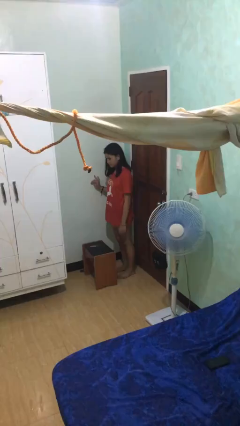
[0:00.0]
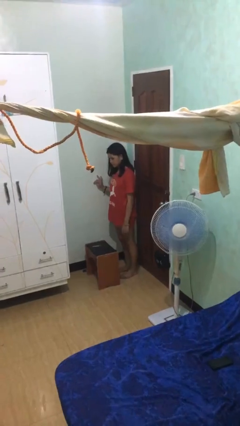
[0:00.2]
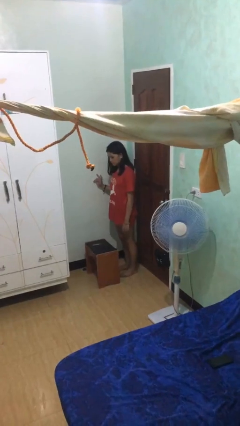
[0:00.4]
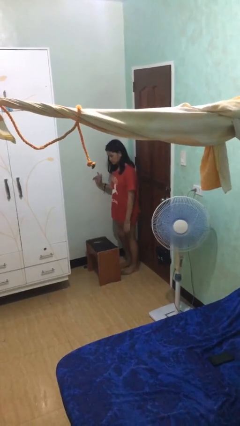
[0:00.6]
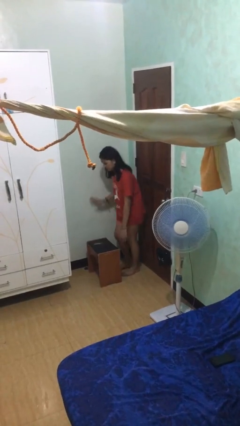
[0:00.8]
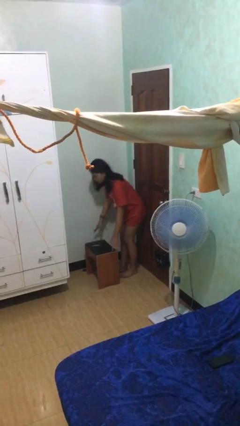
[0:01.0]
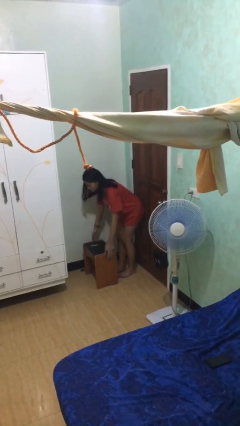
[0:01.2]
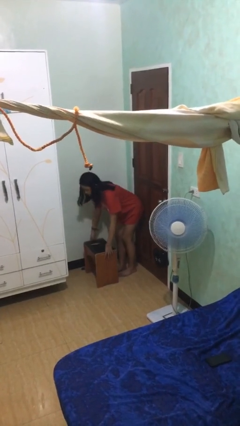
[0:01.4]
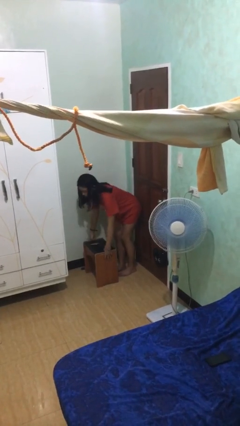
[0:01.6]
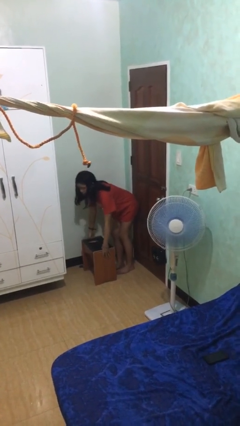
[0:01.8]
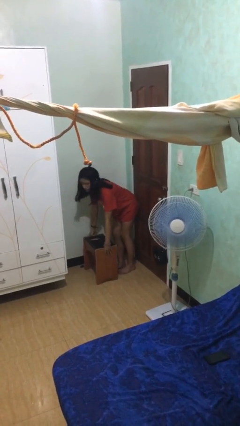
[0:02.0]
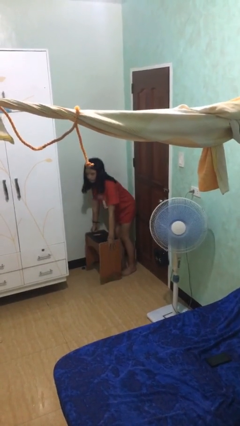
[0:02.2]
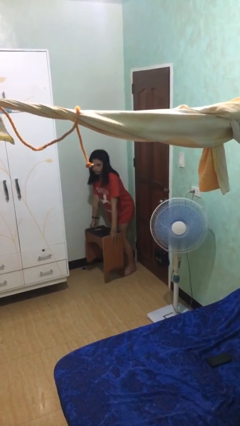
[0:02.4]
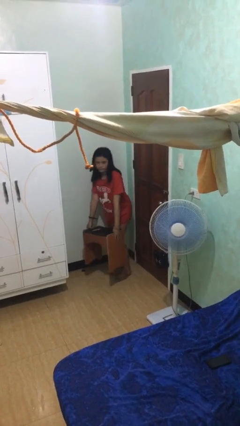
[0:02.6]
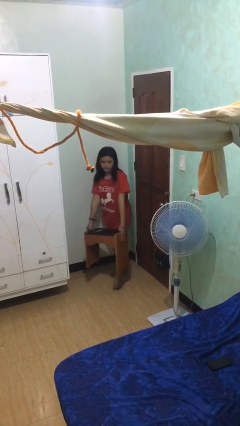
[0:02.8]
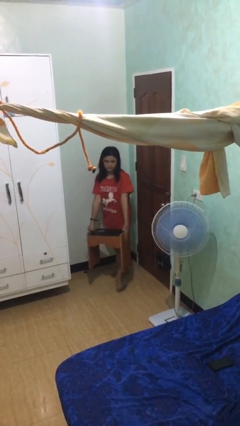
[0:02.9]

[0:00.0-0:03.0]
person picks up object from floor

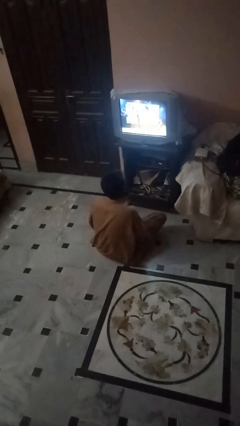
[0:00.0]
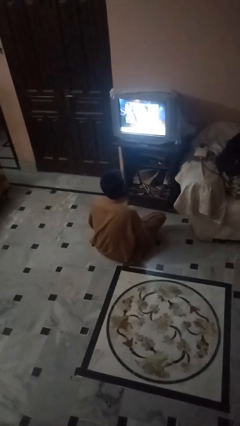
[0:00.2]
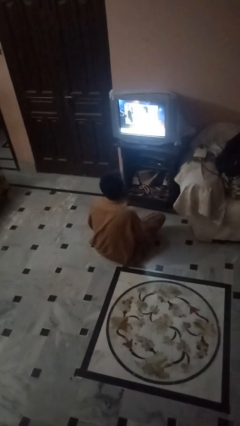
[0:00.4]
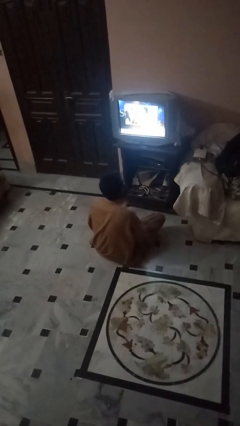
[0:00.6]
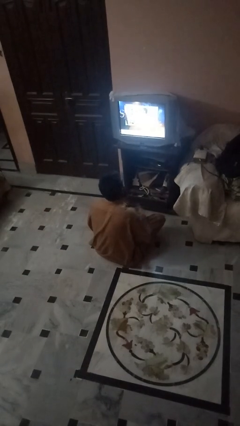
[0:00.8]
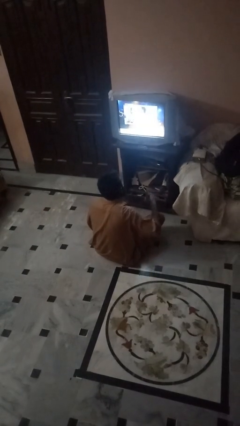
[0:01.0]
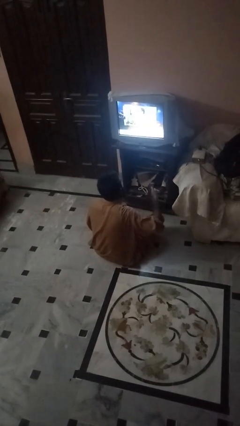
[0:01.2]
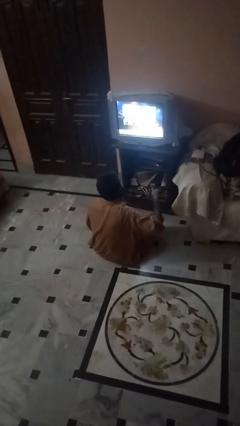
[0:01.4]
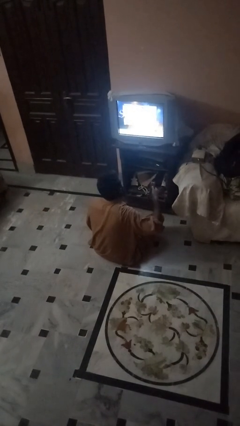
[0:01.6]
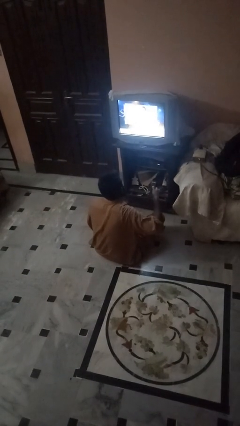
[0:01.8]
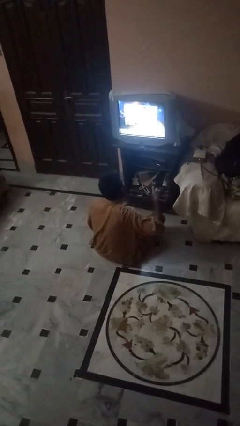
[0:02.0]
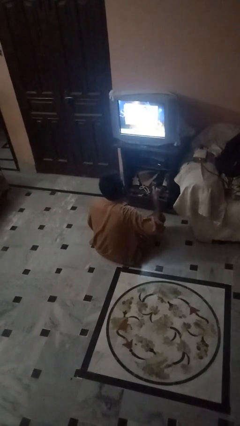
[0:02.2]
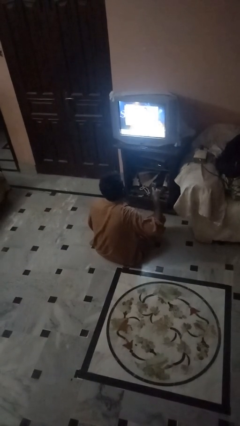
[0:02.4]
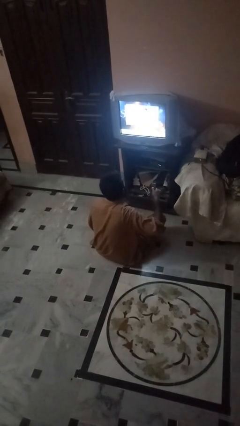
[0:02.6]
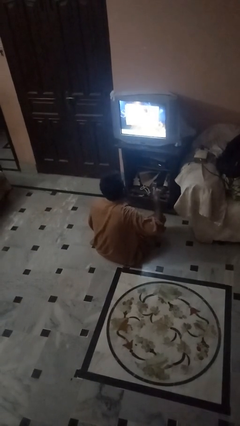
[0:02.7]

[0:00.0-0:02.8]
person uses television remote

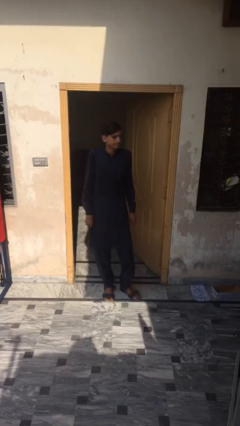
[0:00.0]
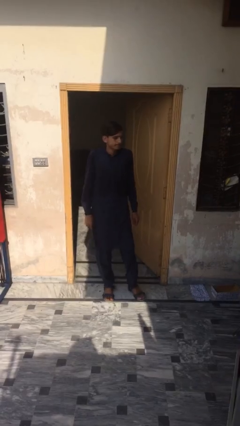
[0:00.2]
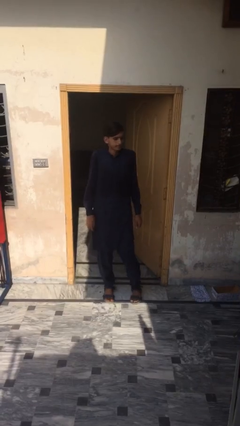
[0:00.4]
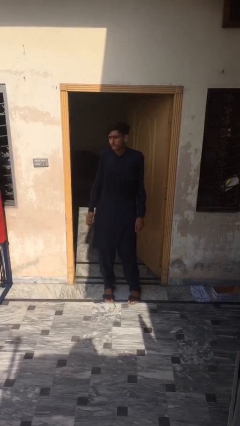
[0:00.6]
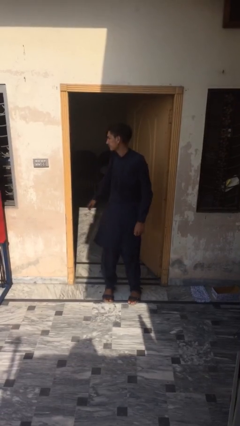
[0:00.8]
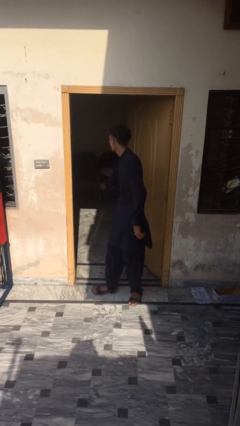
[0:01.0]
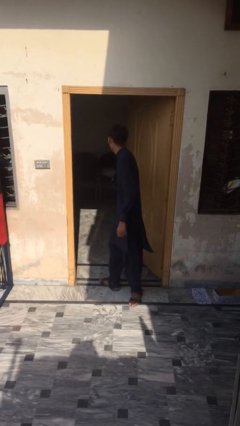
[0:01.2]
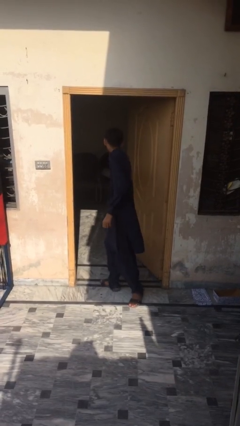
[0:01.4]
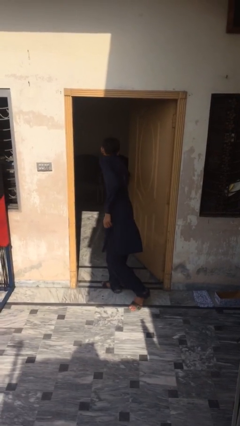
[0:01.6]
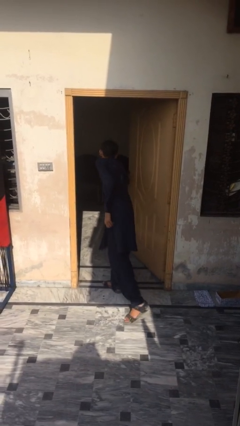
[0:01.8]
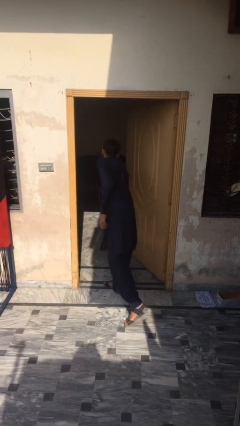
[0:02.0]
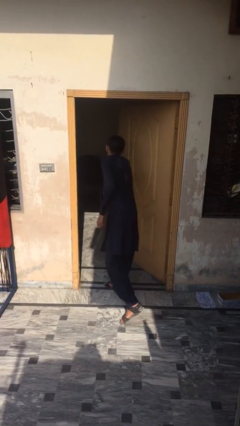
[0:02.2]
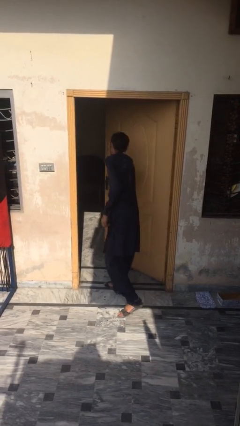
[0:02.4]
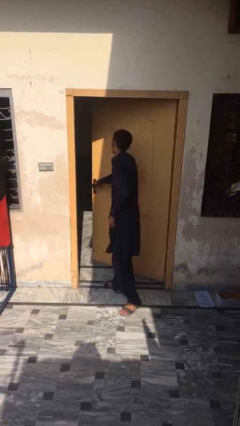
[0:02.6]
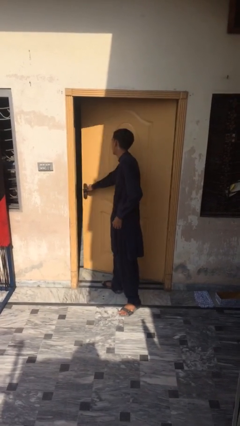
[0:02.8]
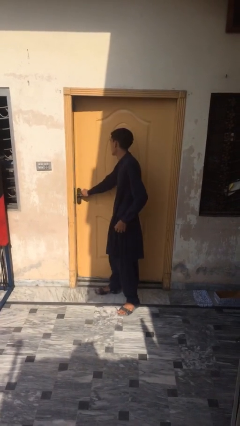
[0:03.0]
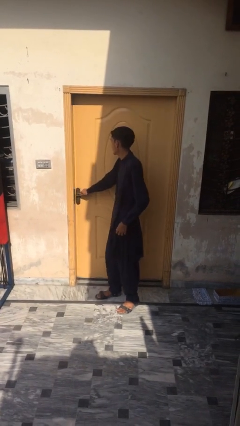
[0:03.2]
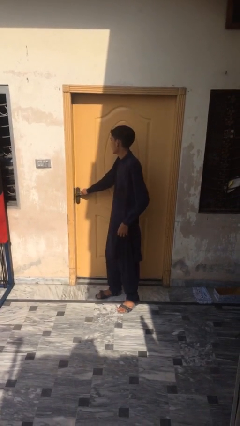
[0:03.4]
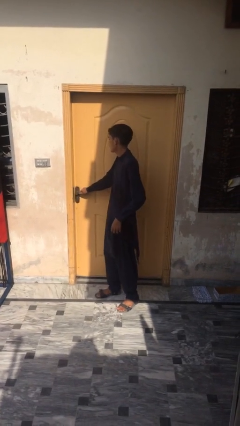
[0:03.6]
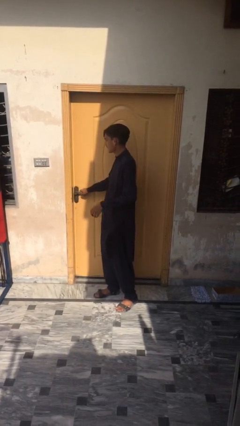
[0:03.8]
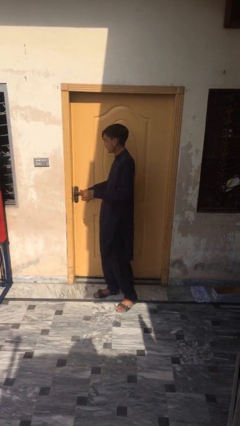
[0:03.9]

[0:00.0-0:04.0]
person closes facility door

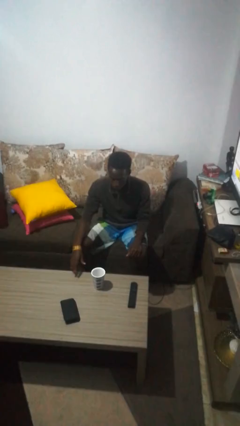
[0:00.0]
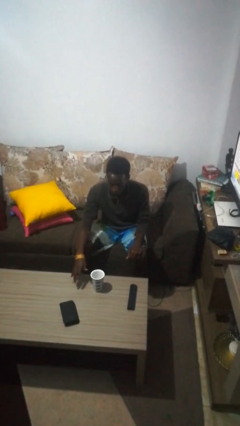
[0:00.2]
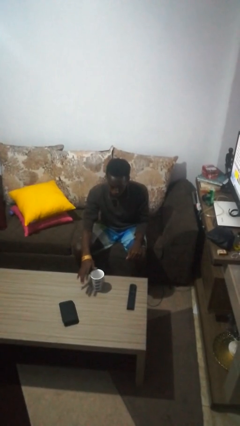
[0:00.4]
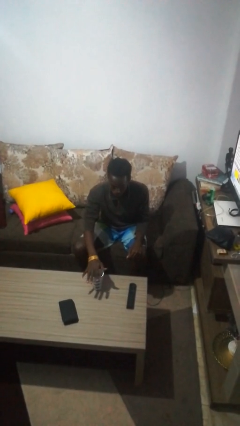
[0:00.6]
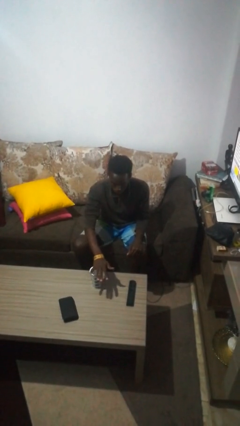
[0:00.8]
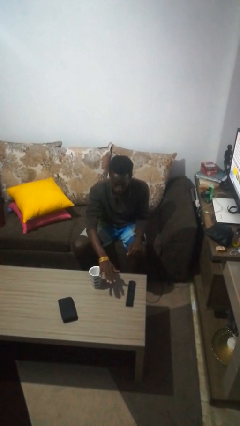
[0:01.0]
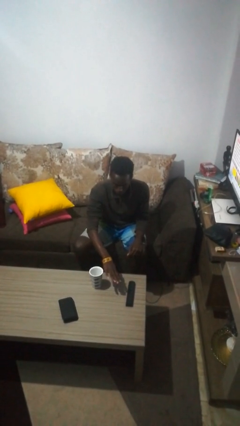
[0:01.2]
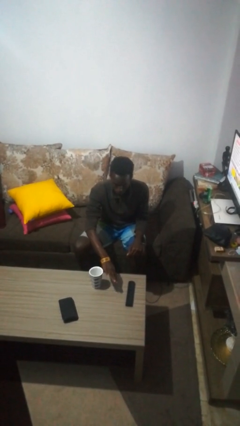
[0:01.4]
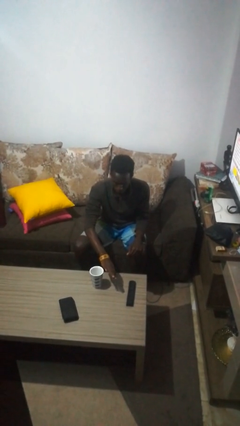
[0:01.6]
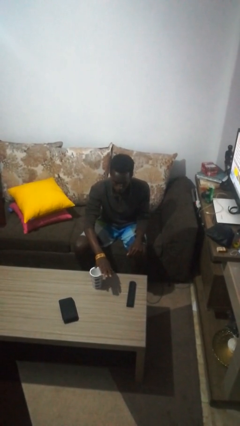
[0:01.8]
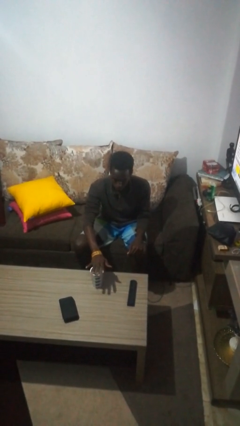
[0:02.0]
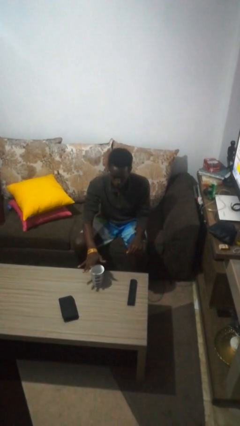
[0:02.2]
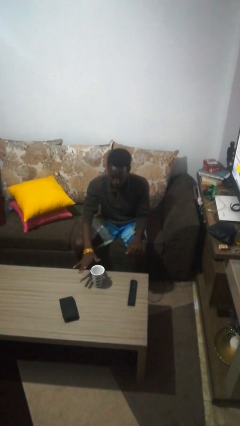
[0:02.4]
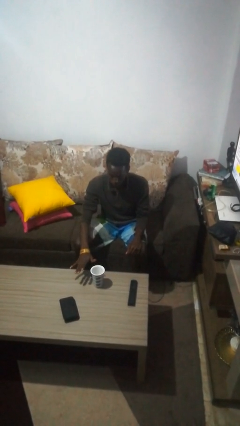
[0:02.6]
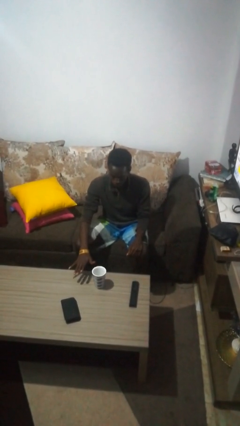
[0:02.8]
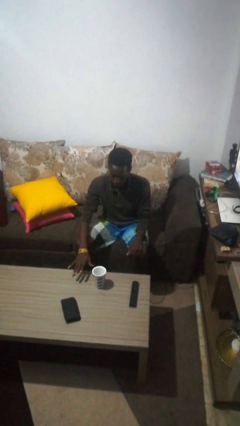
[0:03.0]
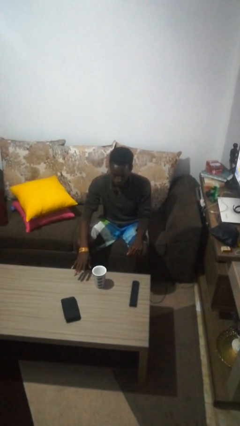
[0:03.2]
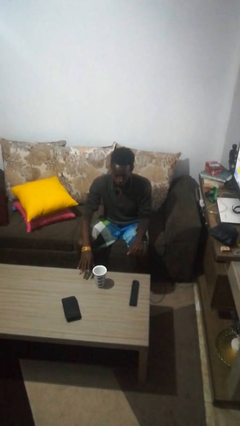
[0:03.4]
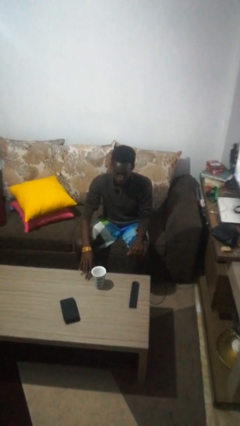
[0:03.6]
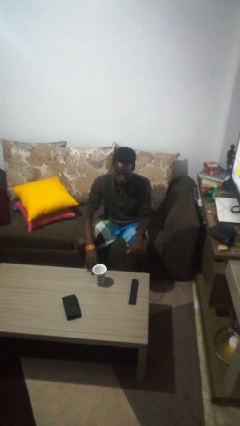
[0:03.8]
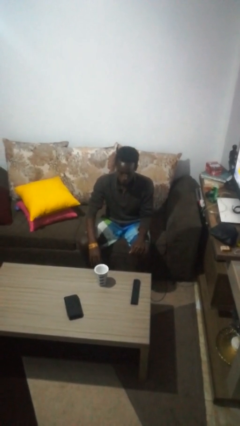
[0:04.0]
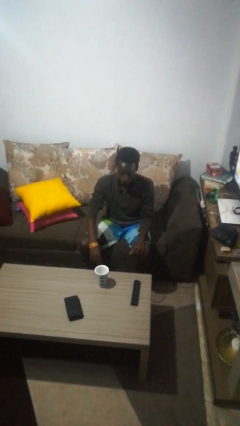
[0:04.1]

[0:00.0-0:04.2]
person waves hand over object

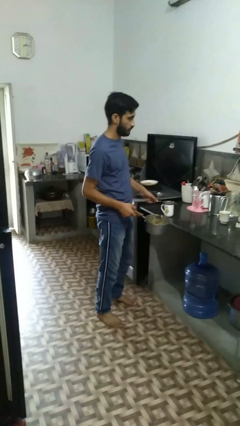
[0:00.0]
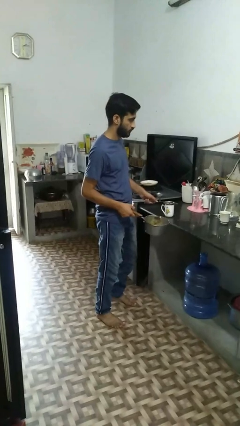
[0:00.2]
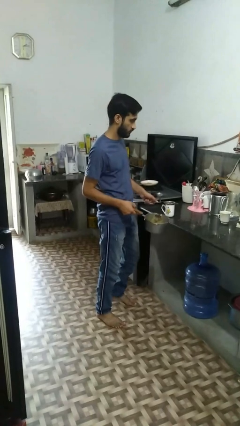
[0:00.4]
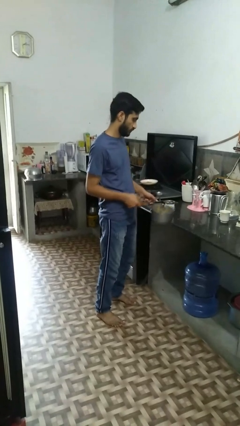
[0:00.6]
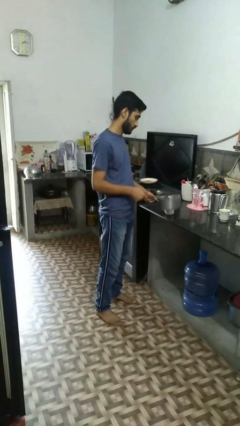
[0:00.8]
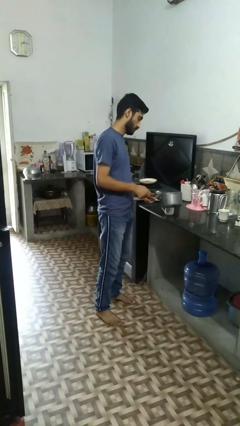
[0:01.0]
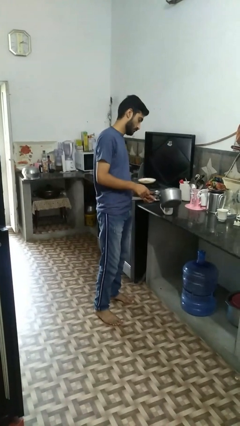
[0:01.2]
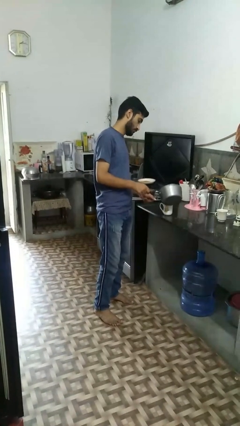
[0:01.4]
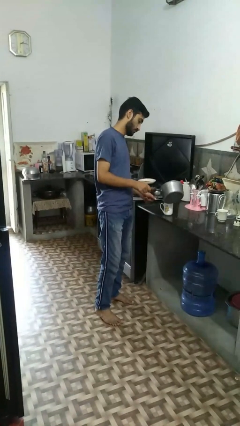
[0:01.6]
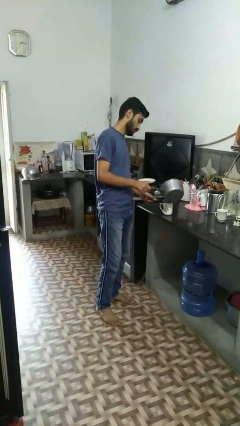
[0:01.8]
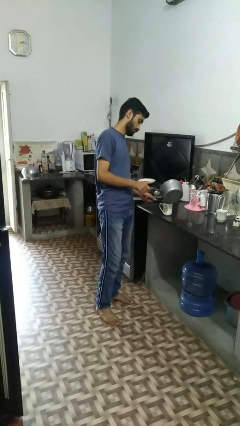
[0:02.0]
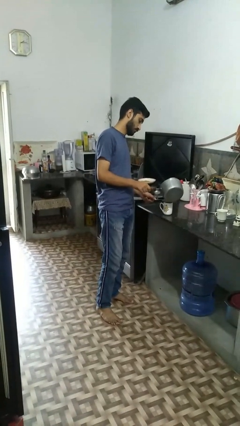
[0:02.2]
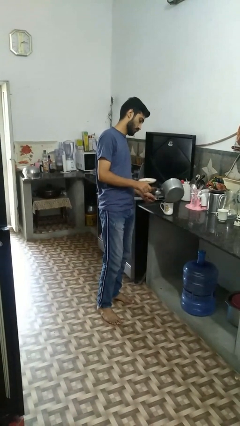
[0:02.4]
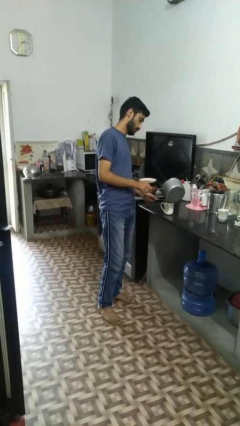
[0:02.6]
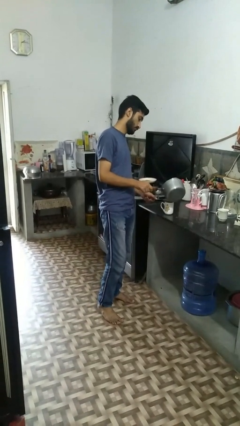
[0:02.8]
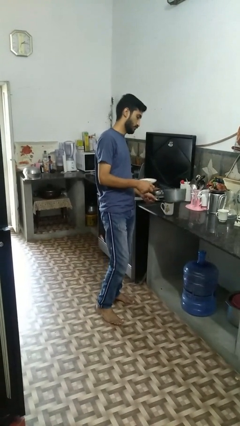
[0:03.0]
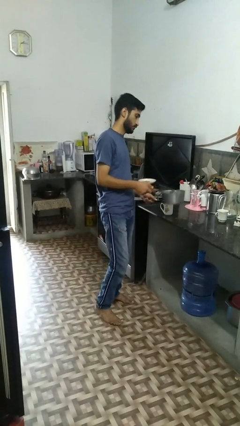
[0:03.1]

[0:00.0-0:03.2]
person pours coffee into mug

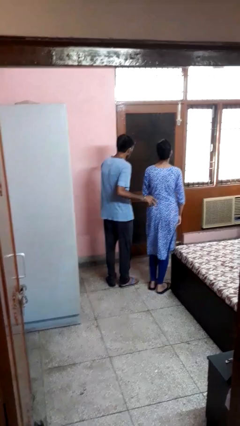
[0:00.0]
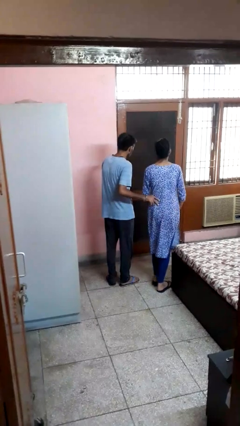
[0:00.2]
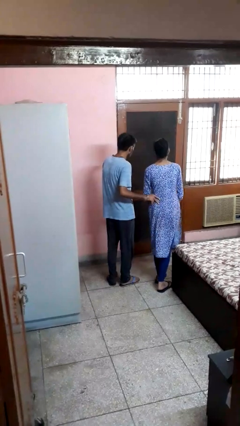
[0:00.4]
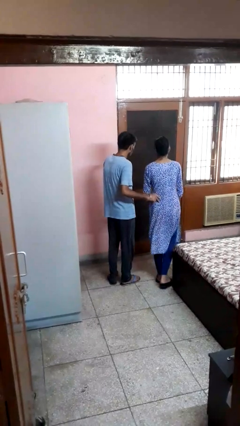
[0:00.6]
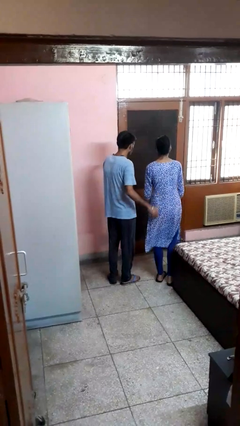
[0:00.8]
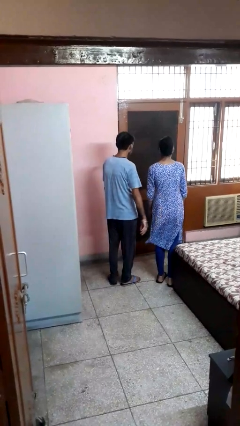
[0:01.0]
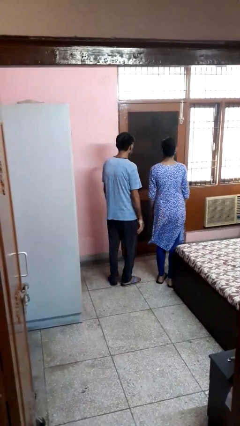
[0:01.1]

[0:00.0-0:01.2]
person tickles person
